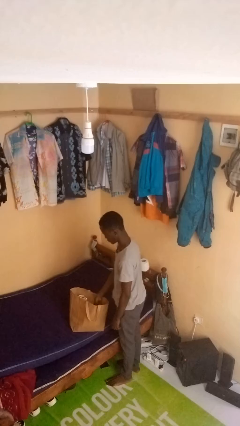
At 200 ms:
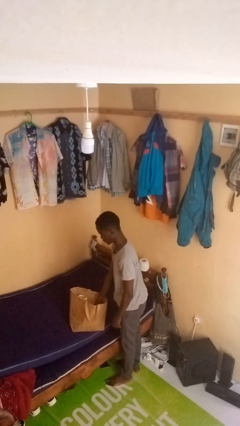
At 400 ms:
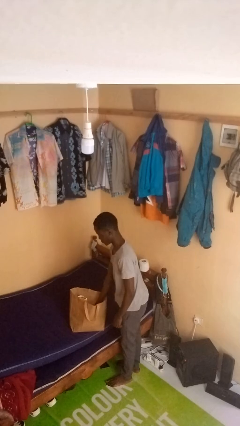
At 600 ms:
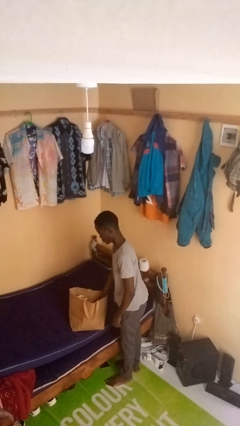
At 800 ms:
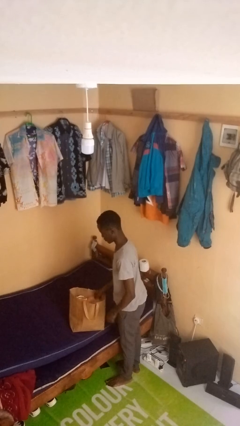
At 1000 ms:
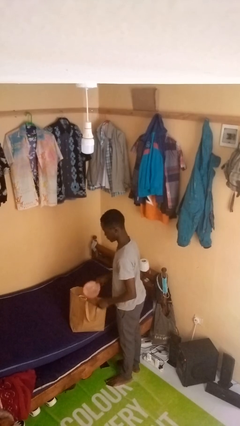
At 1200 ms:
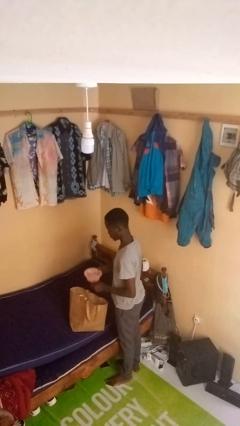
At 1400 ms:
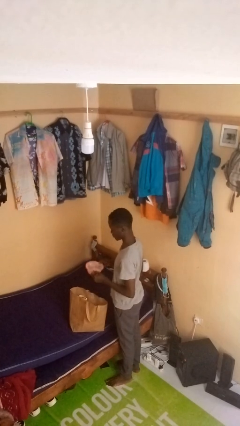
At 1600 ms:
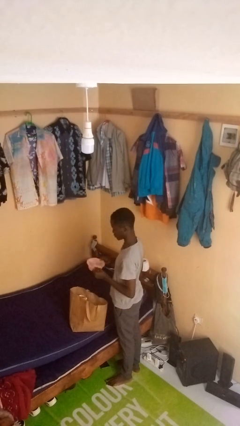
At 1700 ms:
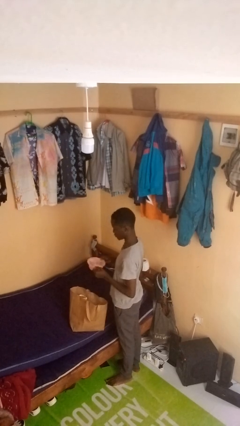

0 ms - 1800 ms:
person takes object from bag

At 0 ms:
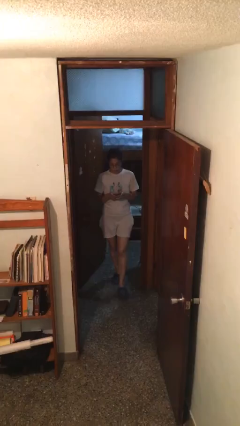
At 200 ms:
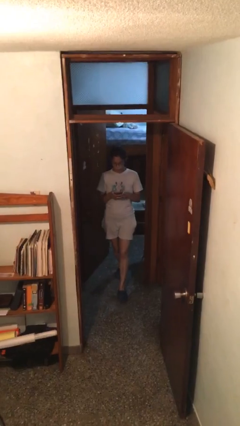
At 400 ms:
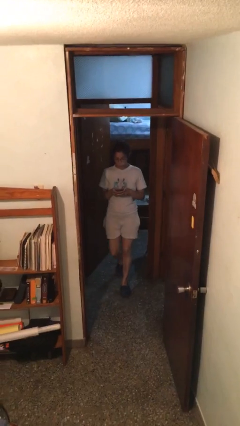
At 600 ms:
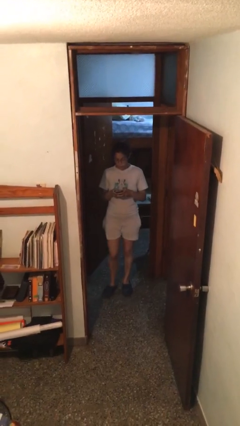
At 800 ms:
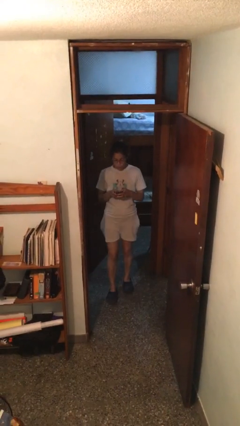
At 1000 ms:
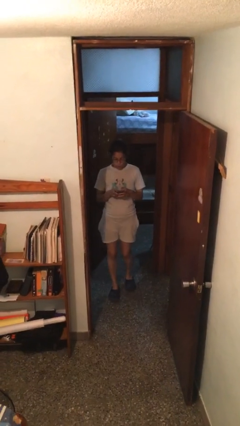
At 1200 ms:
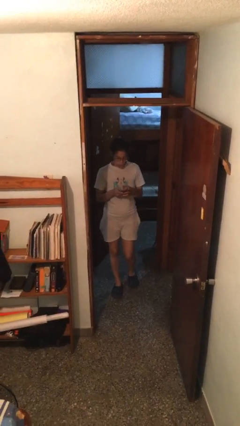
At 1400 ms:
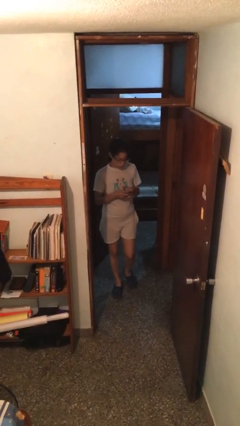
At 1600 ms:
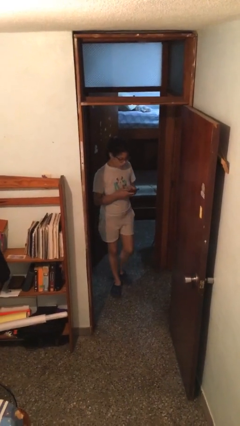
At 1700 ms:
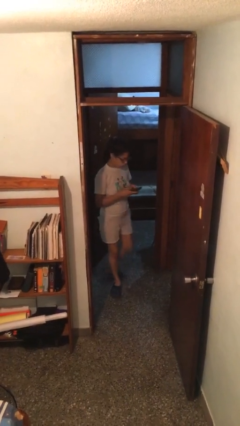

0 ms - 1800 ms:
person enters scene through structure

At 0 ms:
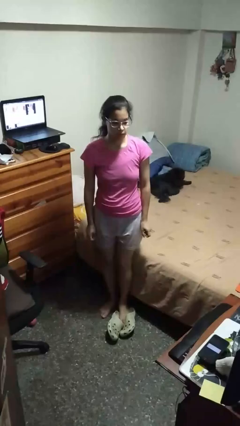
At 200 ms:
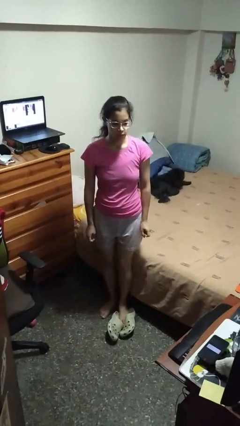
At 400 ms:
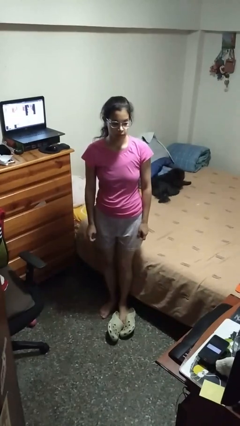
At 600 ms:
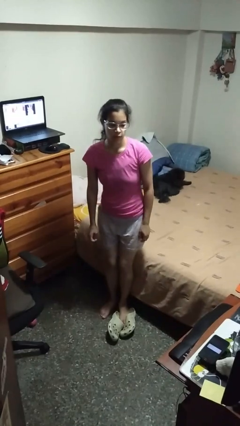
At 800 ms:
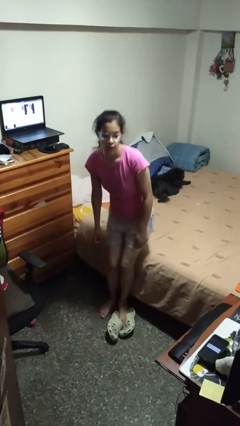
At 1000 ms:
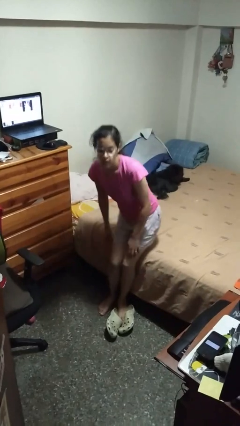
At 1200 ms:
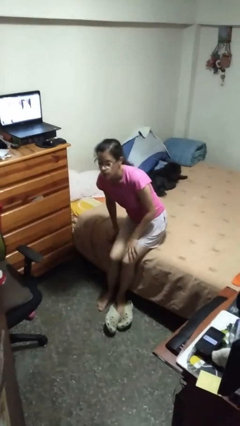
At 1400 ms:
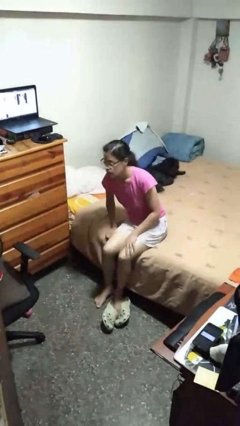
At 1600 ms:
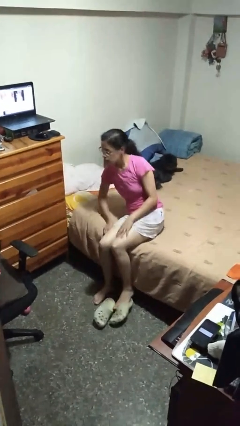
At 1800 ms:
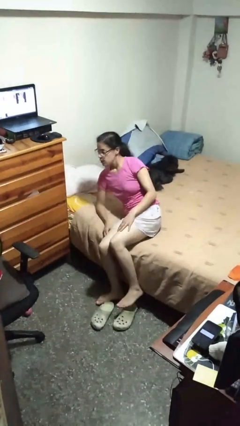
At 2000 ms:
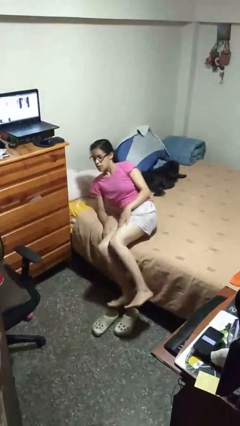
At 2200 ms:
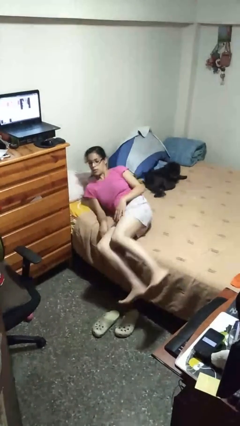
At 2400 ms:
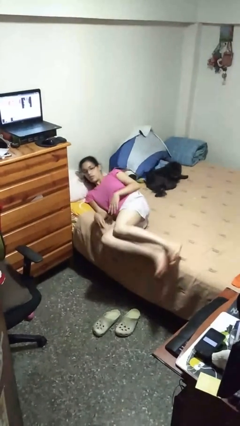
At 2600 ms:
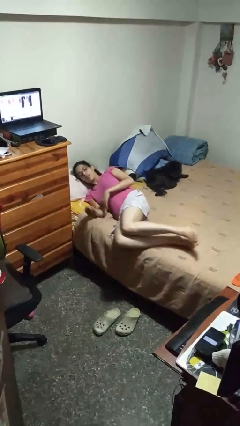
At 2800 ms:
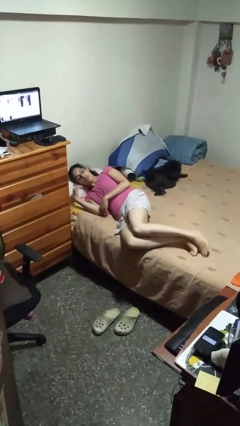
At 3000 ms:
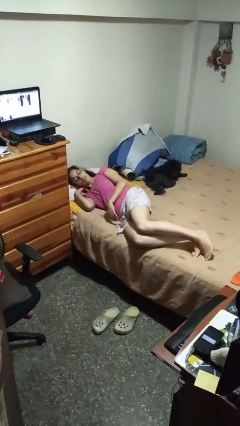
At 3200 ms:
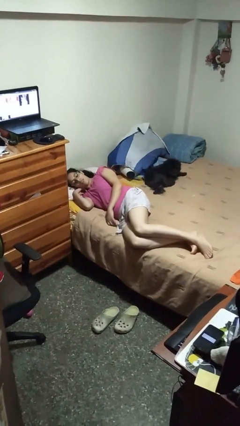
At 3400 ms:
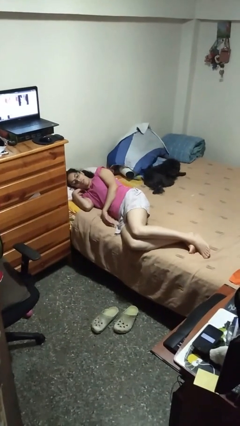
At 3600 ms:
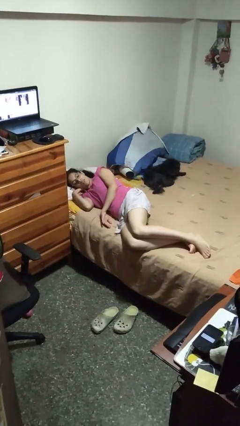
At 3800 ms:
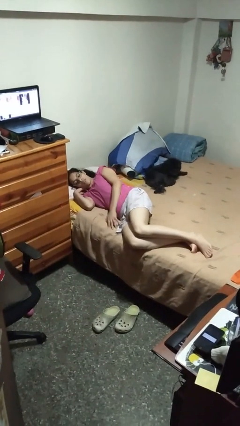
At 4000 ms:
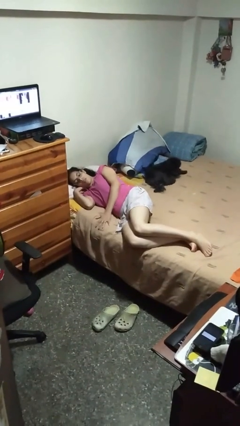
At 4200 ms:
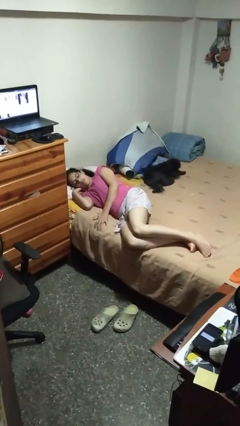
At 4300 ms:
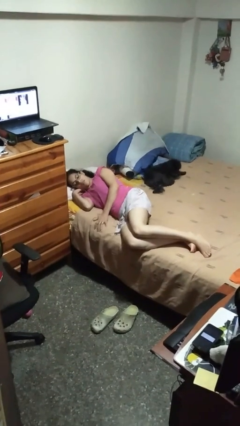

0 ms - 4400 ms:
person lies down on bed

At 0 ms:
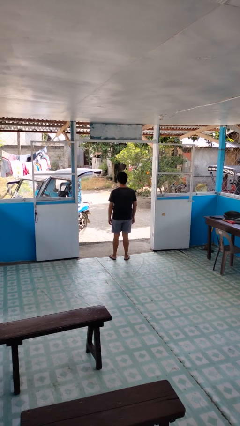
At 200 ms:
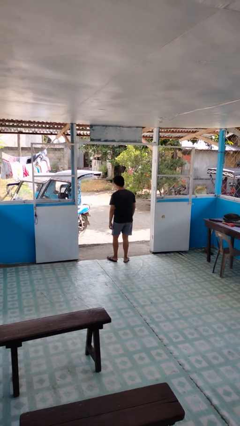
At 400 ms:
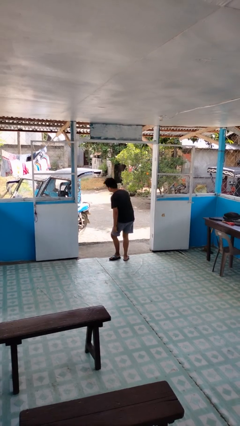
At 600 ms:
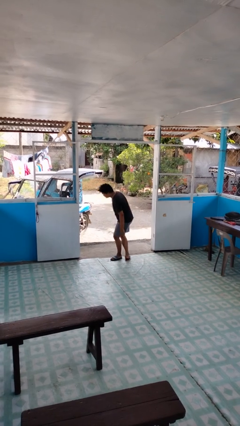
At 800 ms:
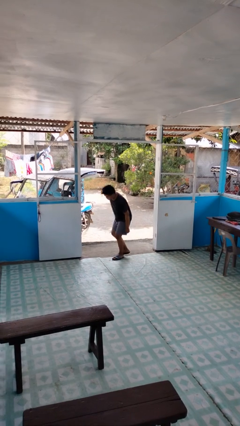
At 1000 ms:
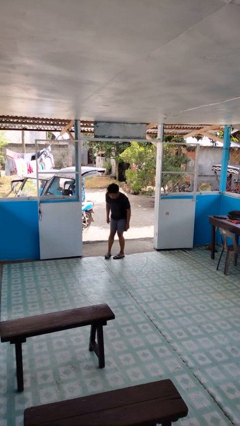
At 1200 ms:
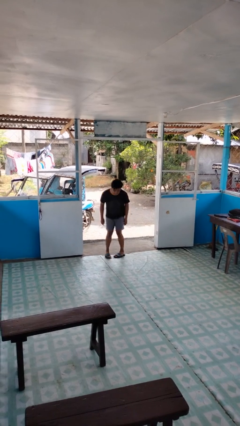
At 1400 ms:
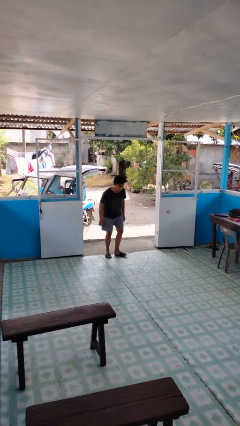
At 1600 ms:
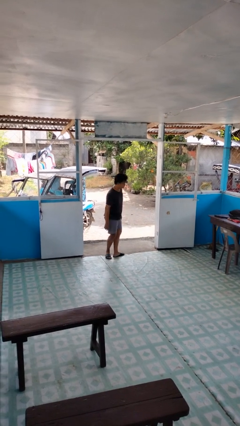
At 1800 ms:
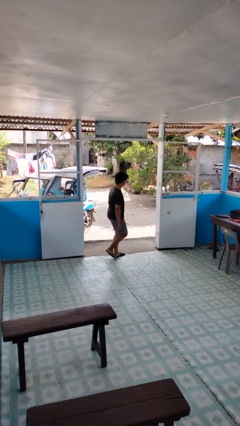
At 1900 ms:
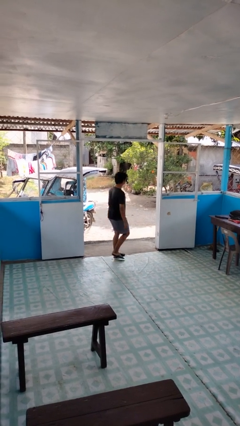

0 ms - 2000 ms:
person twirls

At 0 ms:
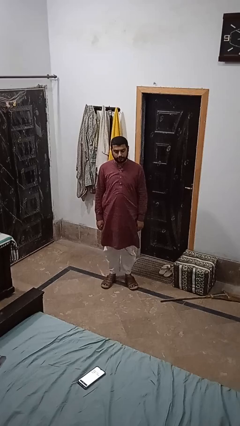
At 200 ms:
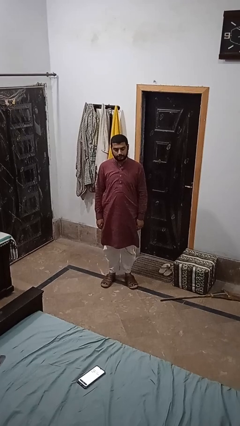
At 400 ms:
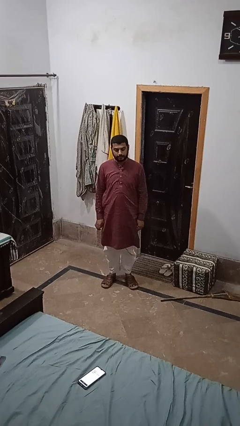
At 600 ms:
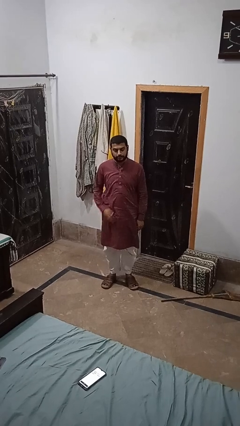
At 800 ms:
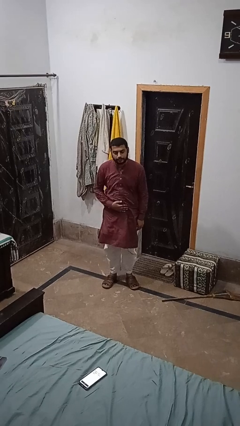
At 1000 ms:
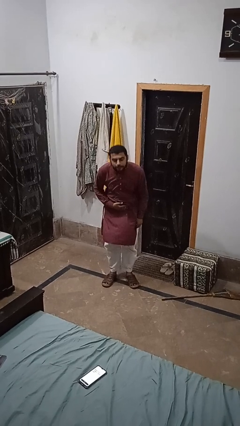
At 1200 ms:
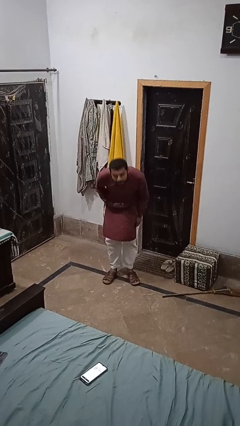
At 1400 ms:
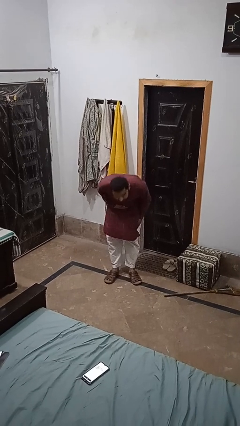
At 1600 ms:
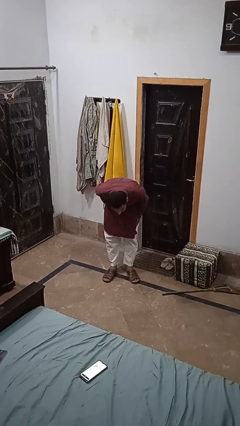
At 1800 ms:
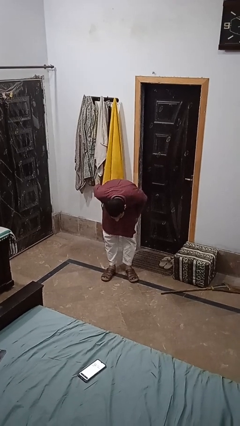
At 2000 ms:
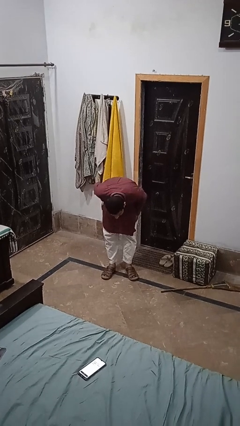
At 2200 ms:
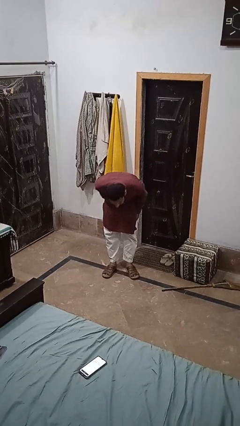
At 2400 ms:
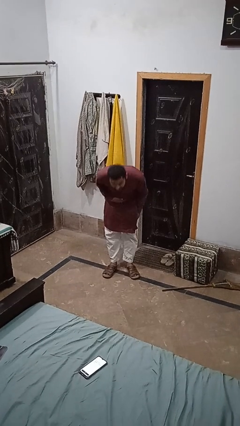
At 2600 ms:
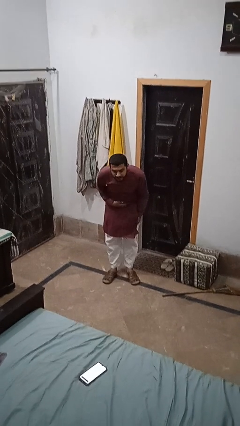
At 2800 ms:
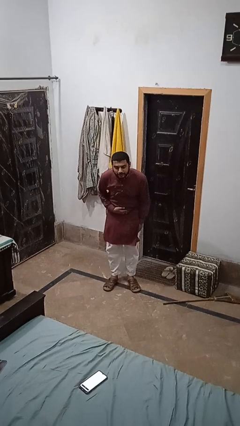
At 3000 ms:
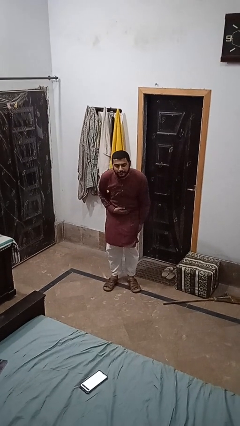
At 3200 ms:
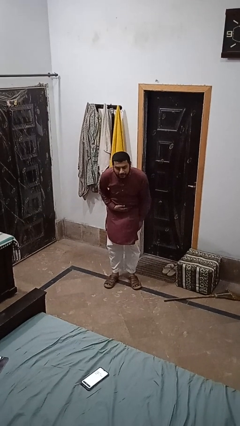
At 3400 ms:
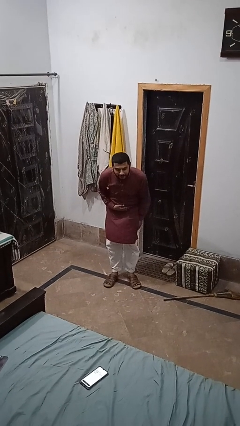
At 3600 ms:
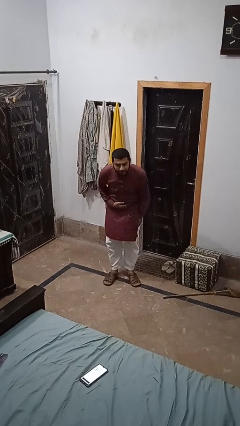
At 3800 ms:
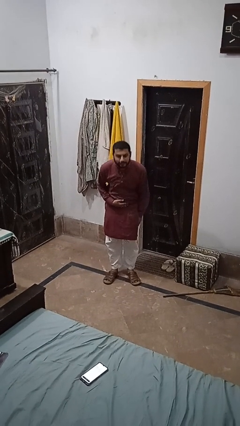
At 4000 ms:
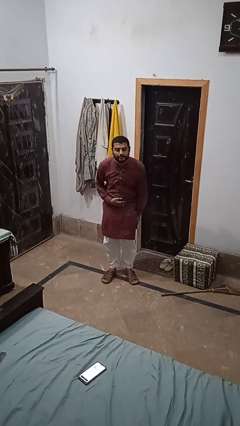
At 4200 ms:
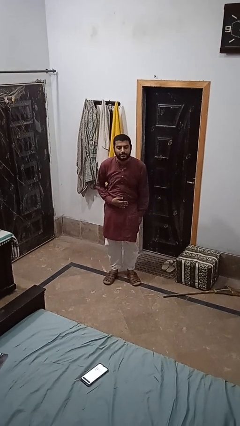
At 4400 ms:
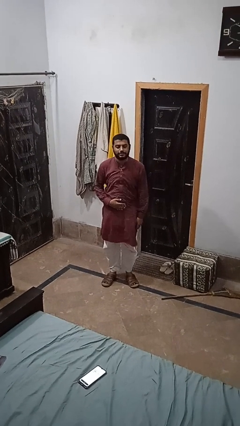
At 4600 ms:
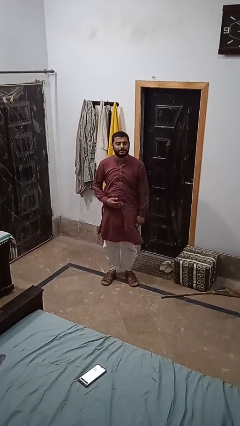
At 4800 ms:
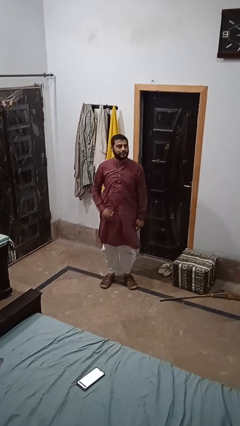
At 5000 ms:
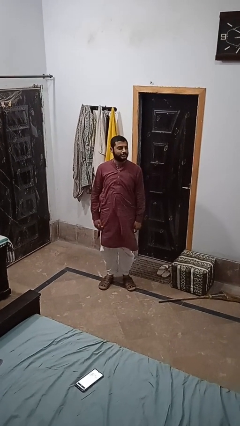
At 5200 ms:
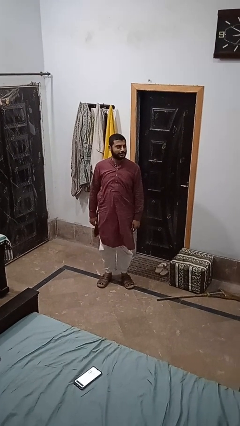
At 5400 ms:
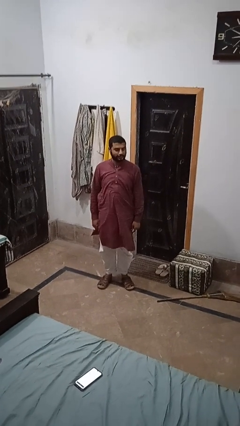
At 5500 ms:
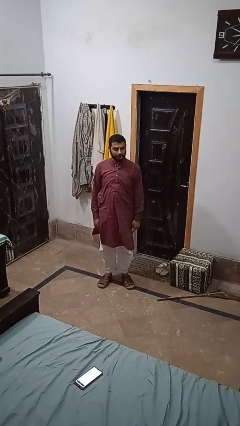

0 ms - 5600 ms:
person bows

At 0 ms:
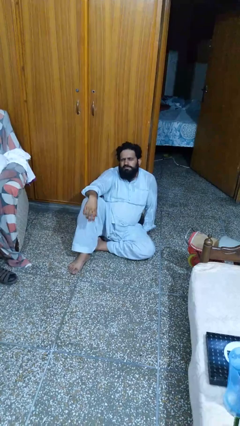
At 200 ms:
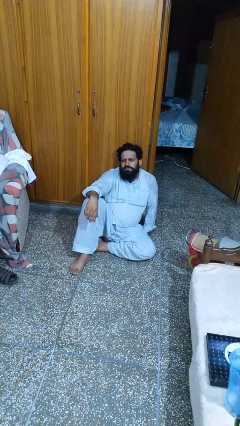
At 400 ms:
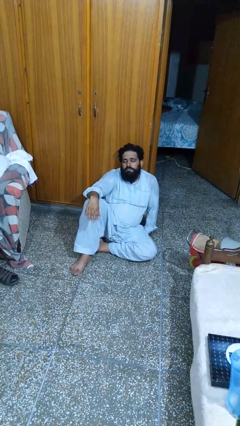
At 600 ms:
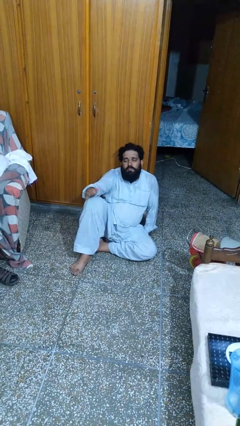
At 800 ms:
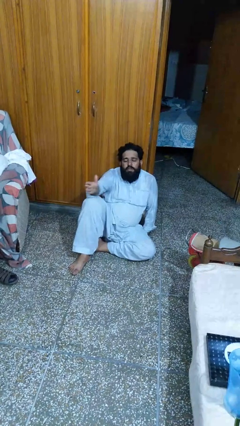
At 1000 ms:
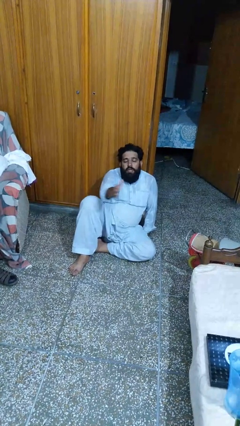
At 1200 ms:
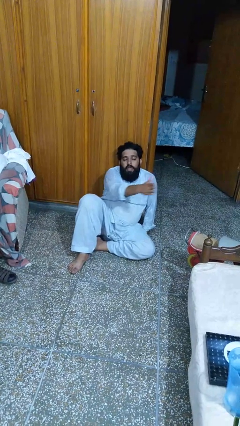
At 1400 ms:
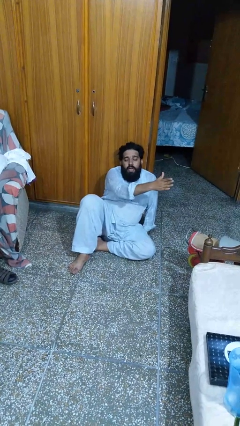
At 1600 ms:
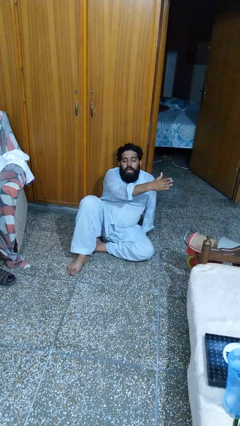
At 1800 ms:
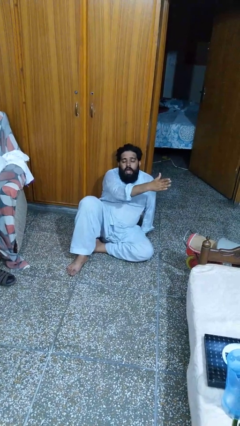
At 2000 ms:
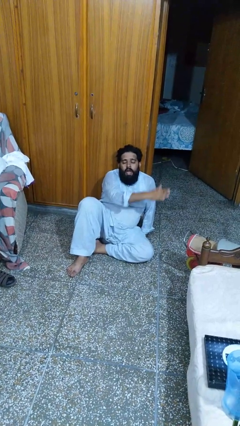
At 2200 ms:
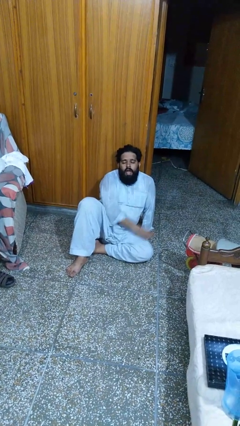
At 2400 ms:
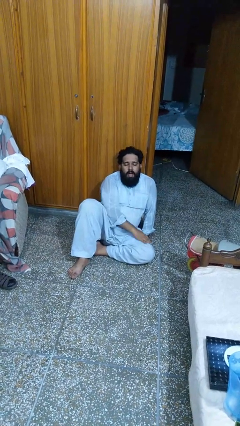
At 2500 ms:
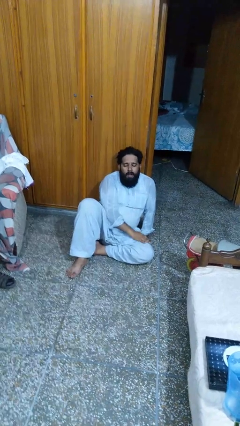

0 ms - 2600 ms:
person gestures swipe left
